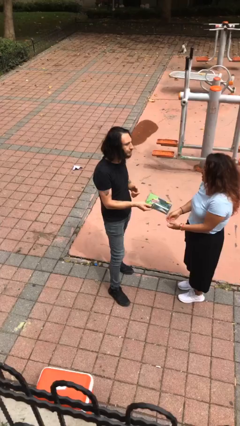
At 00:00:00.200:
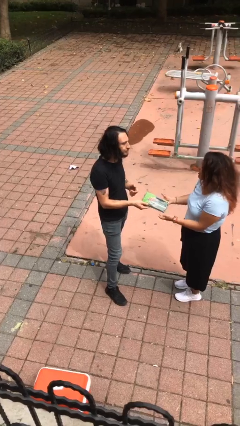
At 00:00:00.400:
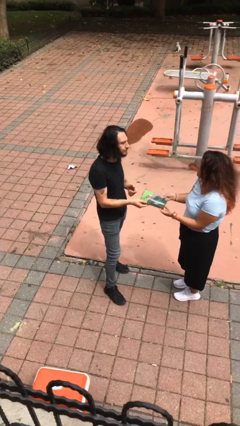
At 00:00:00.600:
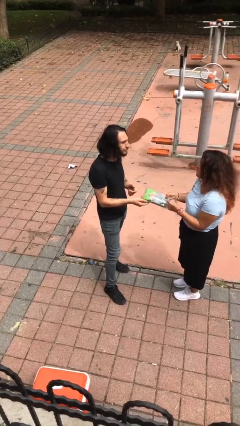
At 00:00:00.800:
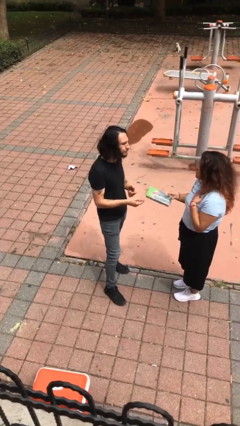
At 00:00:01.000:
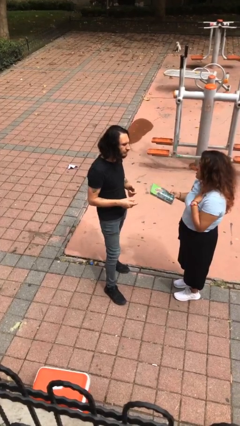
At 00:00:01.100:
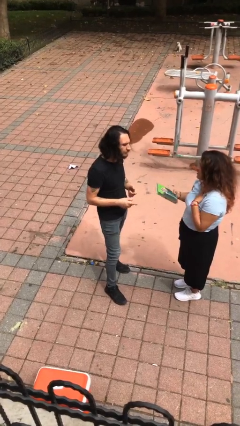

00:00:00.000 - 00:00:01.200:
person transfers object to person

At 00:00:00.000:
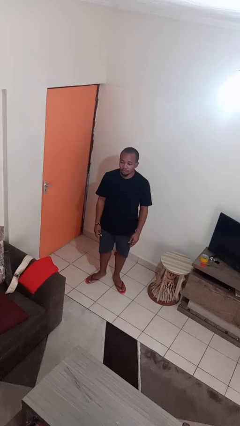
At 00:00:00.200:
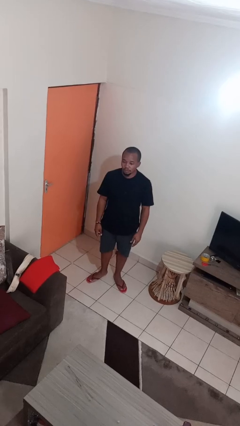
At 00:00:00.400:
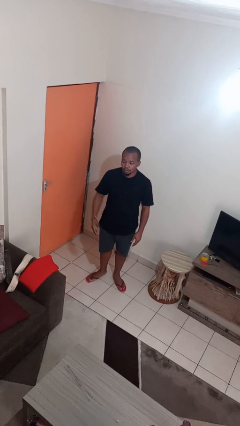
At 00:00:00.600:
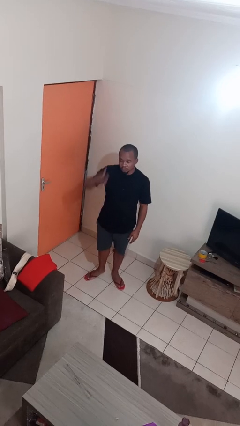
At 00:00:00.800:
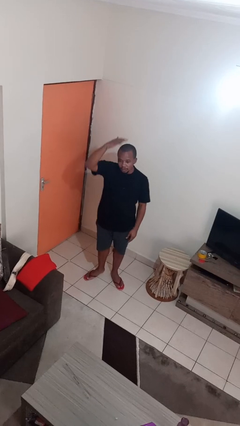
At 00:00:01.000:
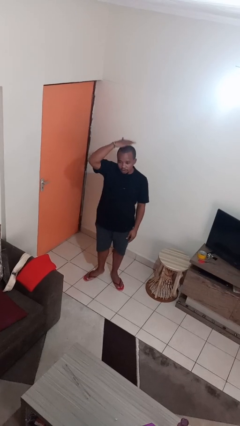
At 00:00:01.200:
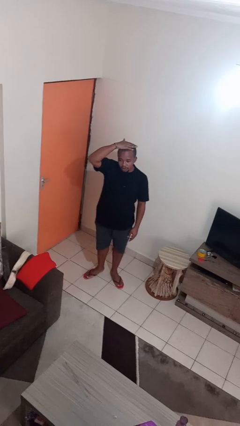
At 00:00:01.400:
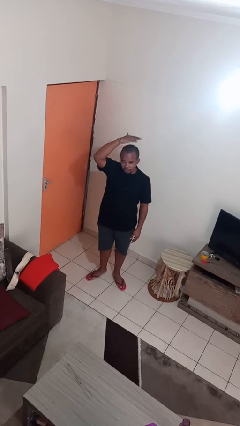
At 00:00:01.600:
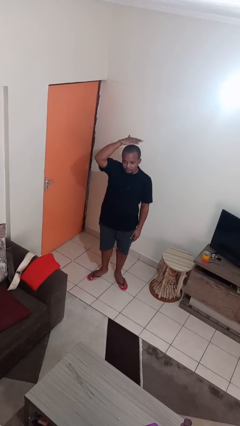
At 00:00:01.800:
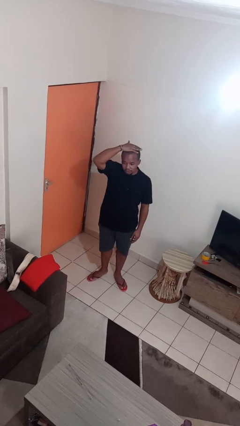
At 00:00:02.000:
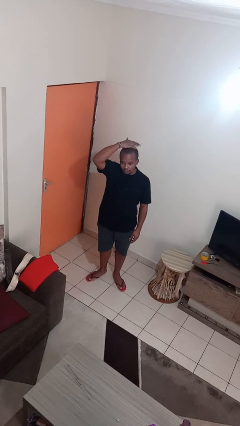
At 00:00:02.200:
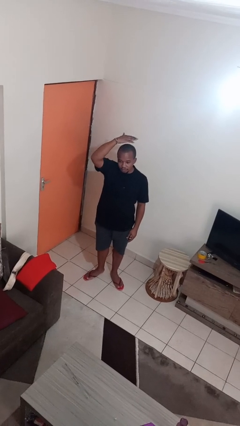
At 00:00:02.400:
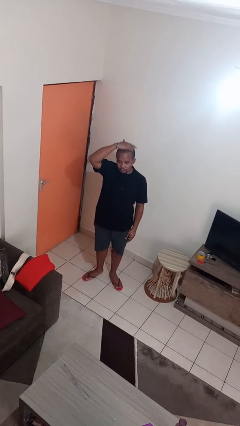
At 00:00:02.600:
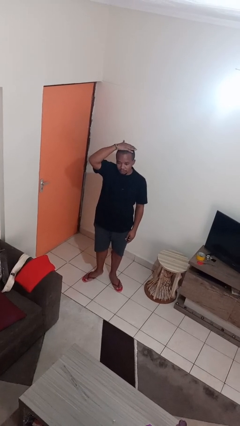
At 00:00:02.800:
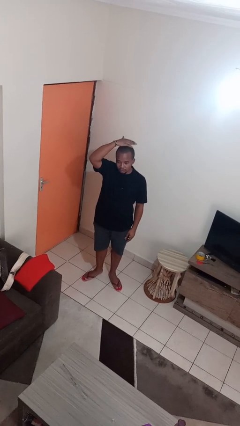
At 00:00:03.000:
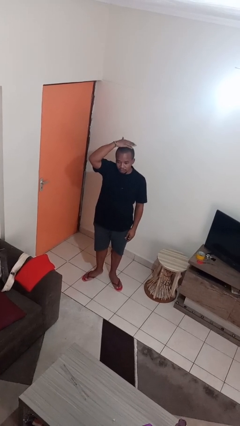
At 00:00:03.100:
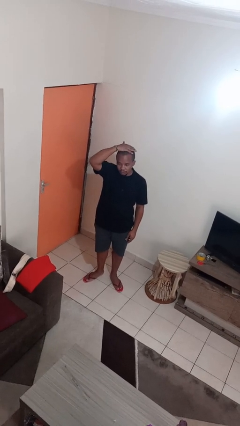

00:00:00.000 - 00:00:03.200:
person pats head

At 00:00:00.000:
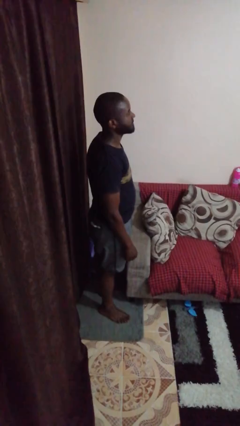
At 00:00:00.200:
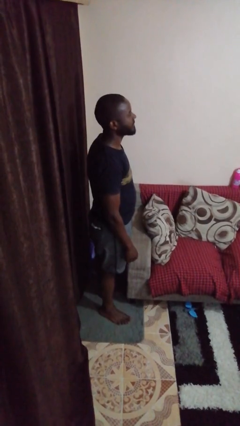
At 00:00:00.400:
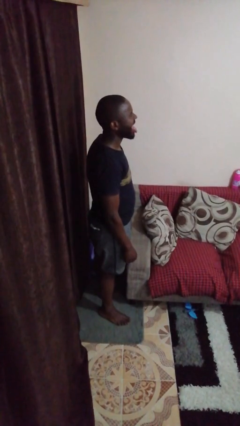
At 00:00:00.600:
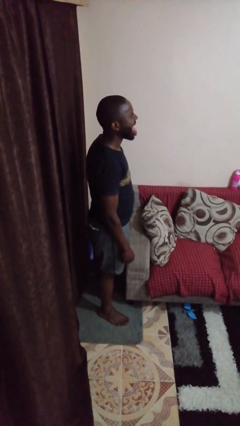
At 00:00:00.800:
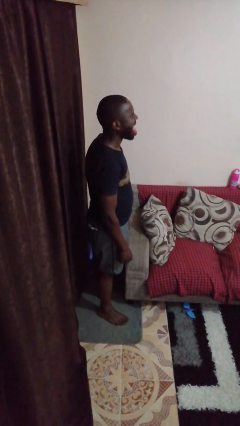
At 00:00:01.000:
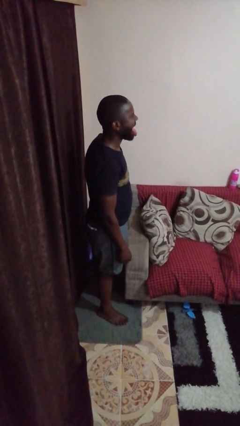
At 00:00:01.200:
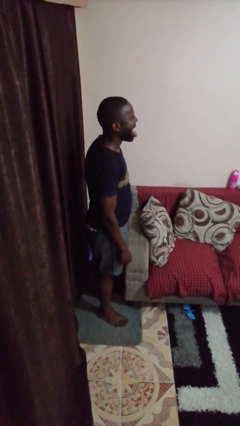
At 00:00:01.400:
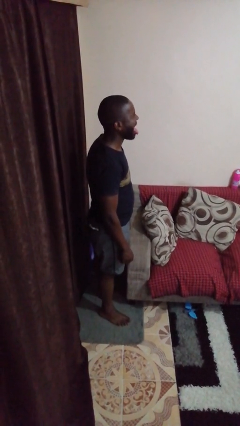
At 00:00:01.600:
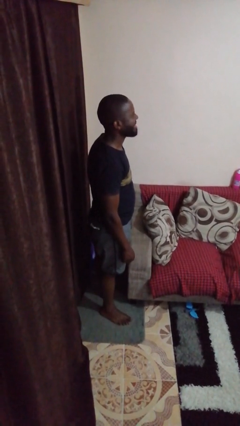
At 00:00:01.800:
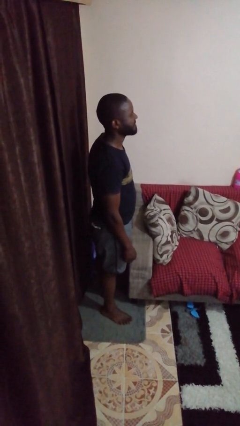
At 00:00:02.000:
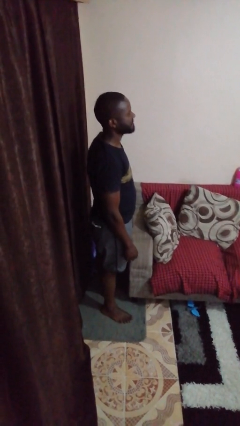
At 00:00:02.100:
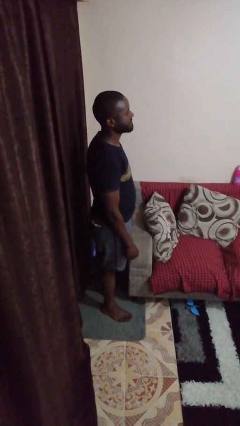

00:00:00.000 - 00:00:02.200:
person sticks out tongue

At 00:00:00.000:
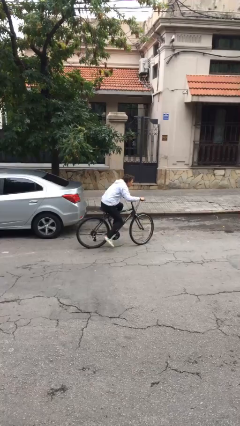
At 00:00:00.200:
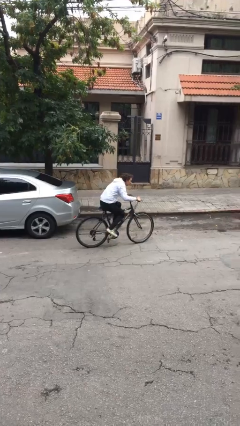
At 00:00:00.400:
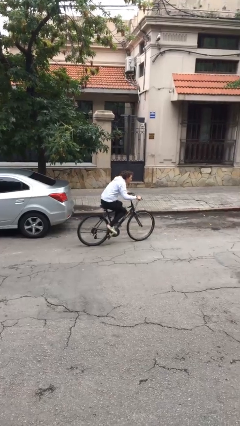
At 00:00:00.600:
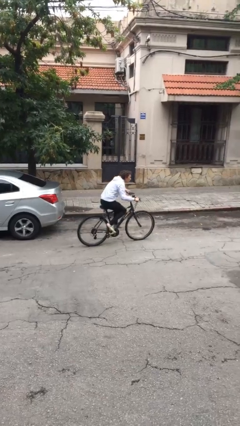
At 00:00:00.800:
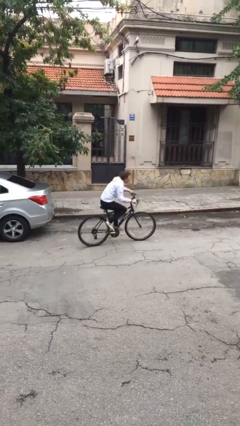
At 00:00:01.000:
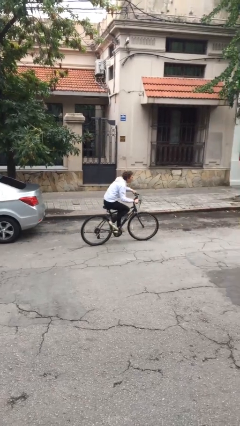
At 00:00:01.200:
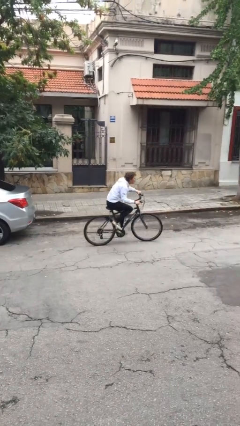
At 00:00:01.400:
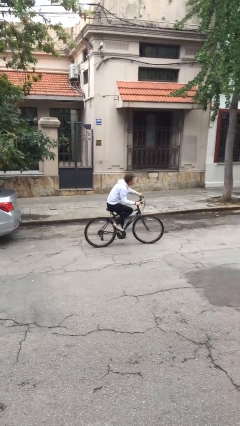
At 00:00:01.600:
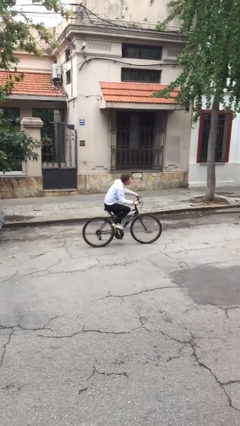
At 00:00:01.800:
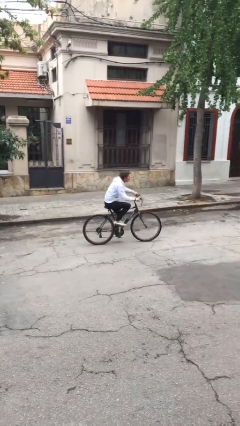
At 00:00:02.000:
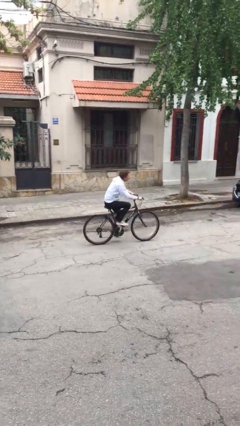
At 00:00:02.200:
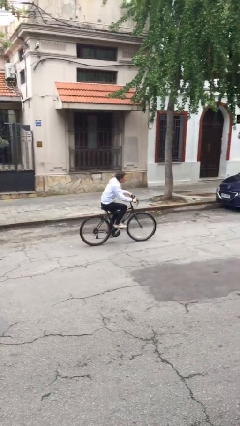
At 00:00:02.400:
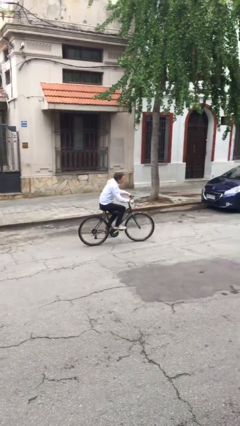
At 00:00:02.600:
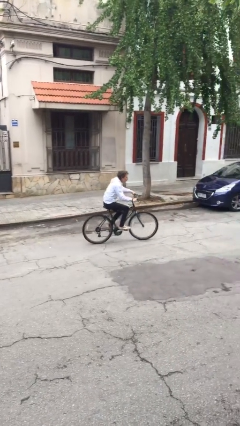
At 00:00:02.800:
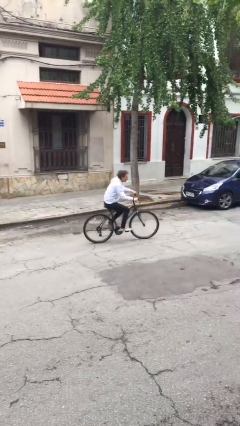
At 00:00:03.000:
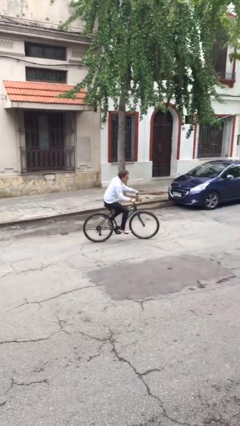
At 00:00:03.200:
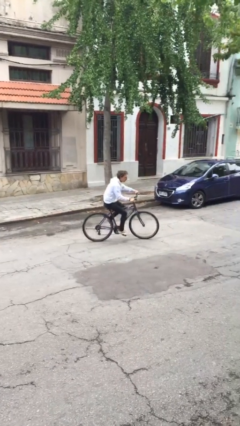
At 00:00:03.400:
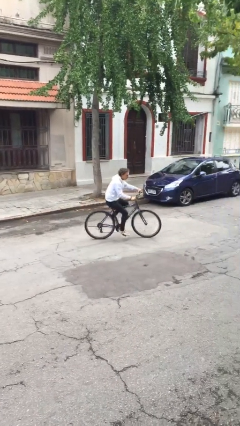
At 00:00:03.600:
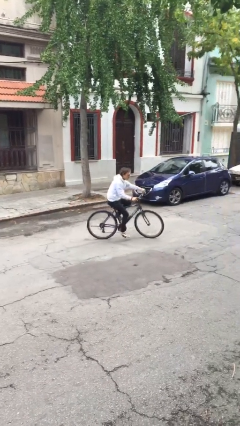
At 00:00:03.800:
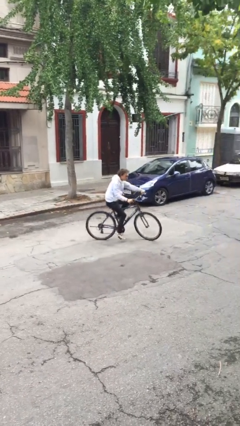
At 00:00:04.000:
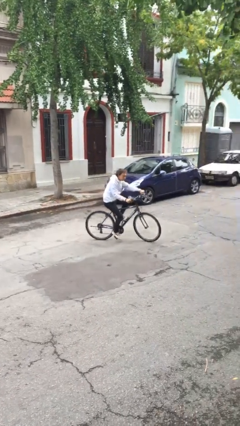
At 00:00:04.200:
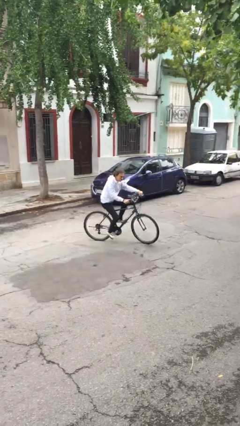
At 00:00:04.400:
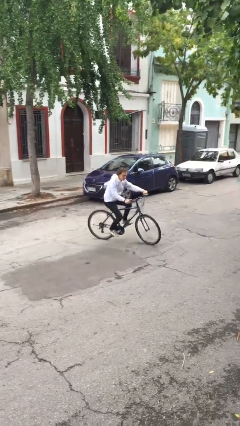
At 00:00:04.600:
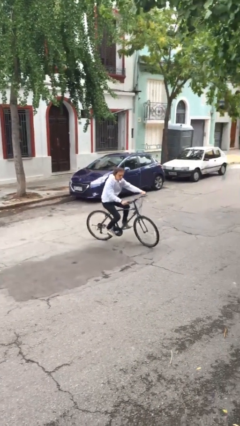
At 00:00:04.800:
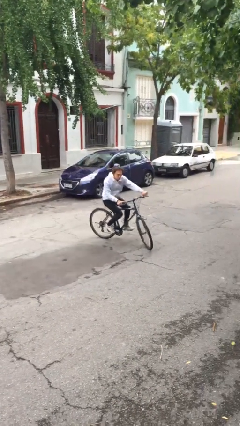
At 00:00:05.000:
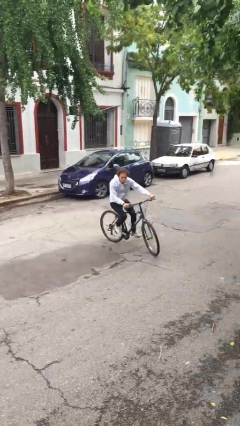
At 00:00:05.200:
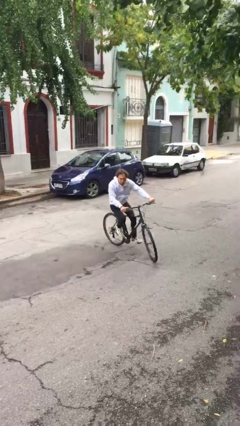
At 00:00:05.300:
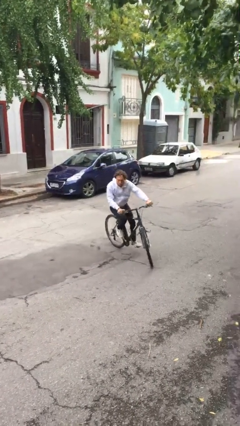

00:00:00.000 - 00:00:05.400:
person rides bicycle

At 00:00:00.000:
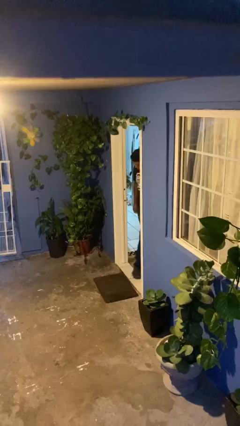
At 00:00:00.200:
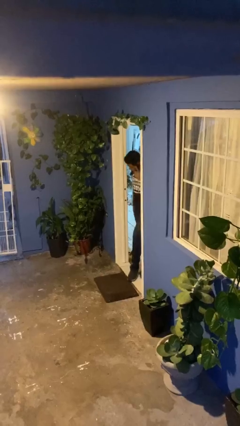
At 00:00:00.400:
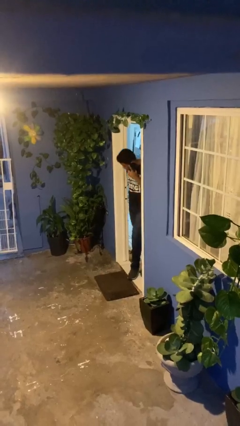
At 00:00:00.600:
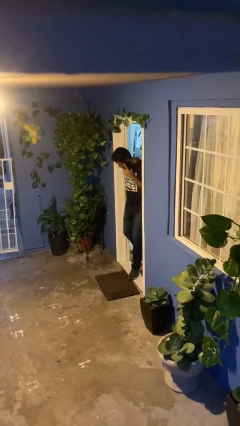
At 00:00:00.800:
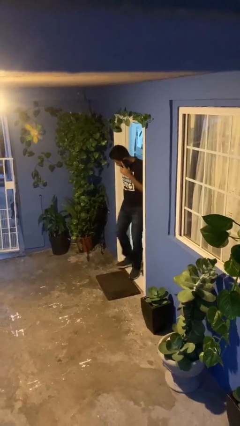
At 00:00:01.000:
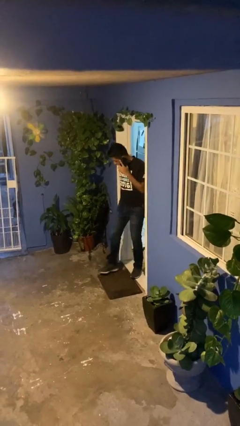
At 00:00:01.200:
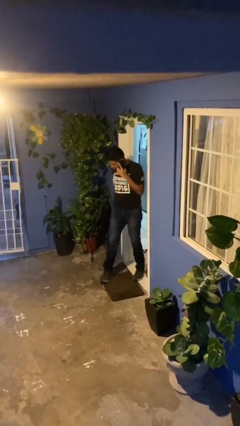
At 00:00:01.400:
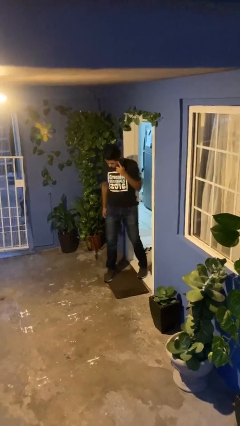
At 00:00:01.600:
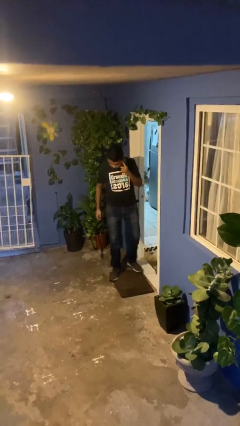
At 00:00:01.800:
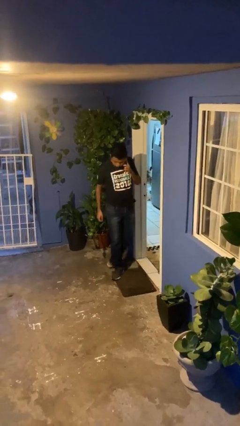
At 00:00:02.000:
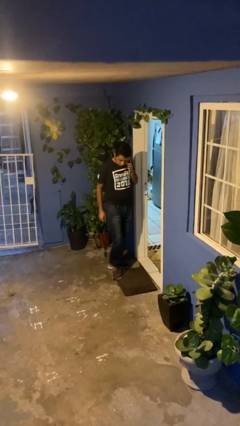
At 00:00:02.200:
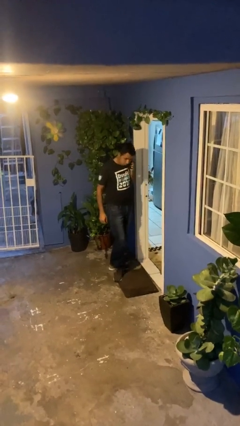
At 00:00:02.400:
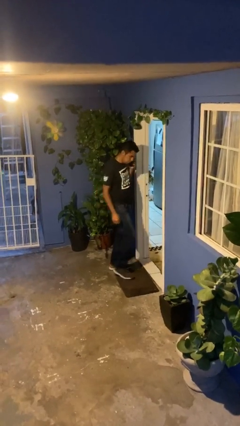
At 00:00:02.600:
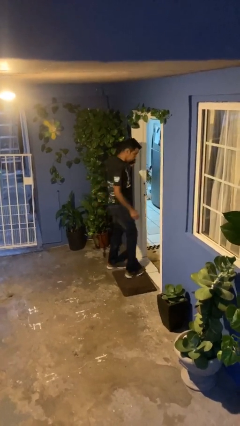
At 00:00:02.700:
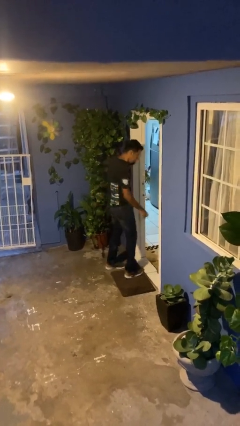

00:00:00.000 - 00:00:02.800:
person enters scene through structure

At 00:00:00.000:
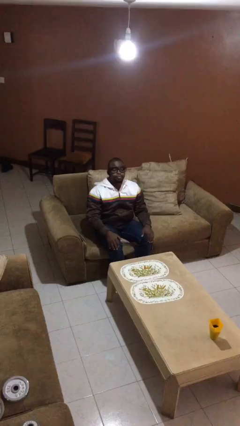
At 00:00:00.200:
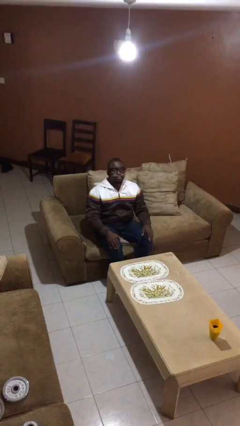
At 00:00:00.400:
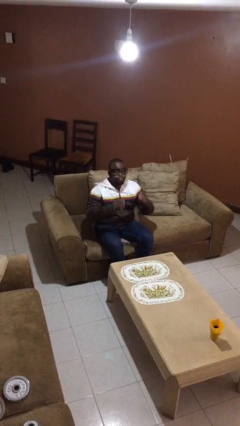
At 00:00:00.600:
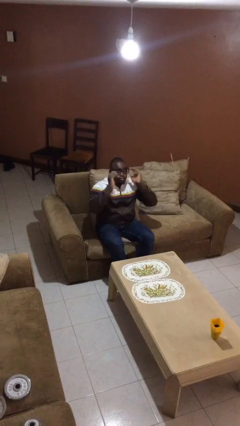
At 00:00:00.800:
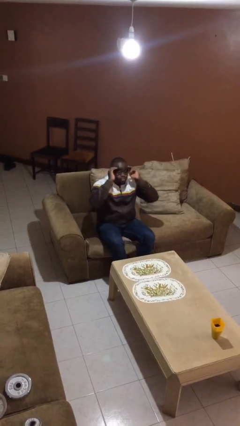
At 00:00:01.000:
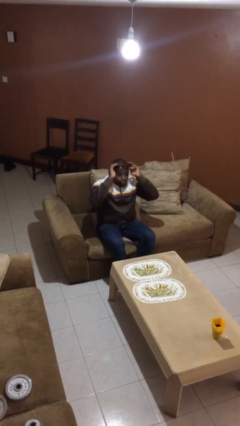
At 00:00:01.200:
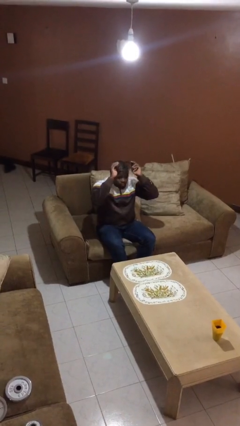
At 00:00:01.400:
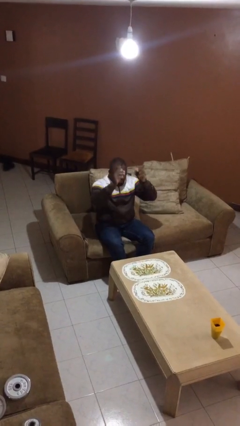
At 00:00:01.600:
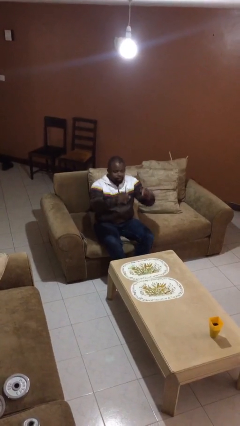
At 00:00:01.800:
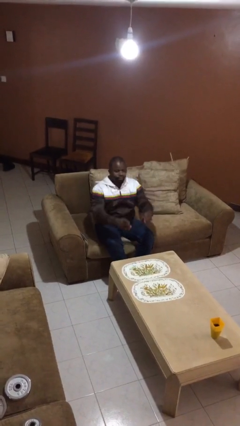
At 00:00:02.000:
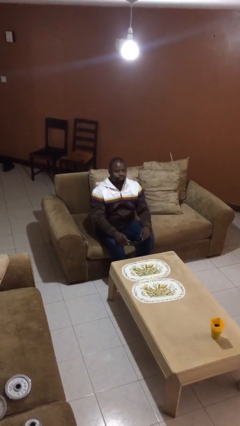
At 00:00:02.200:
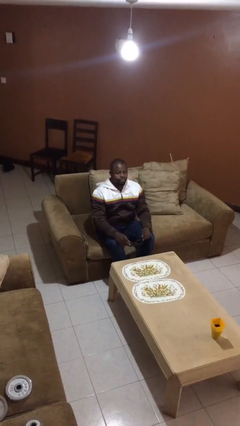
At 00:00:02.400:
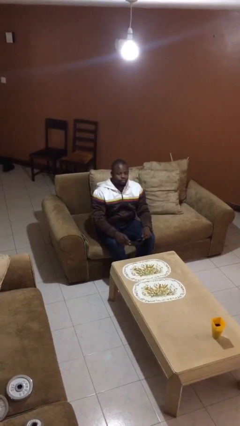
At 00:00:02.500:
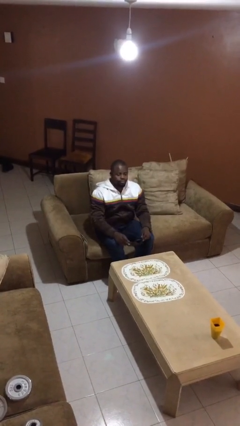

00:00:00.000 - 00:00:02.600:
person takes off glasses
